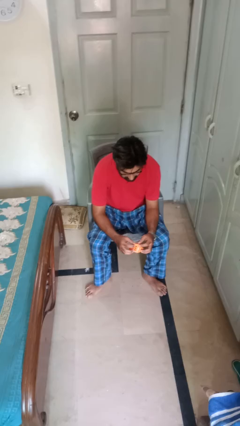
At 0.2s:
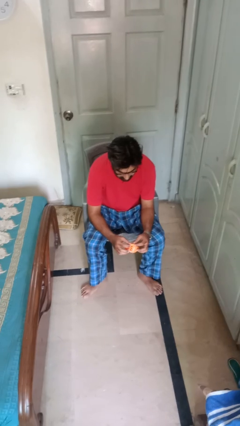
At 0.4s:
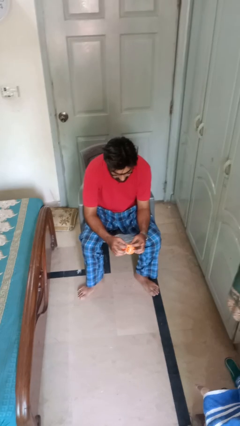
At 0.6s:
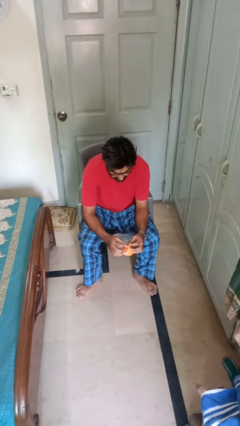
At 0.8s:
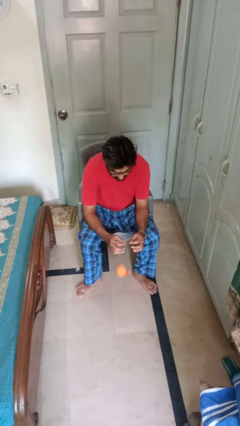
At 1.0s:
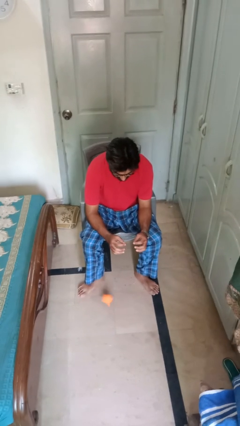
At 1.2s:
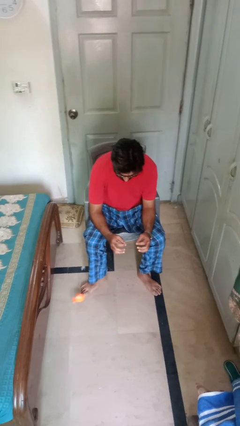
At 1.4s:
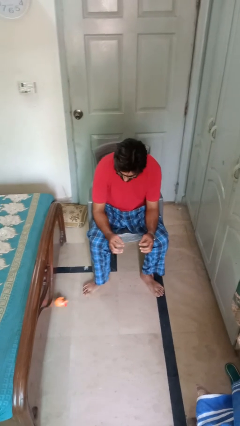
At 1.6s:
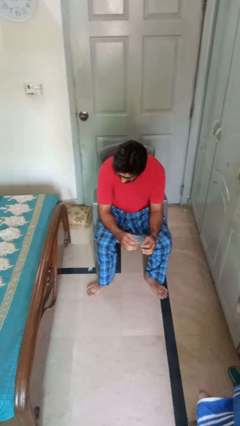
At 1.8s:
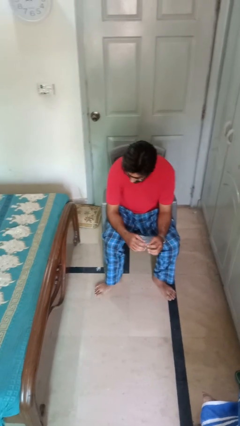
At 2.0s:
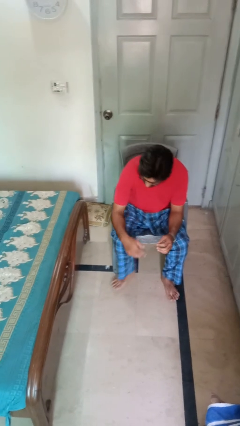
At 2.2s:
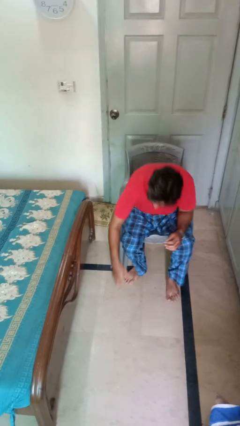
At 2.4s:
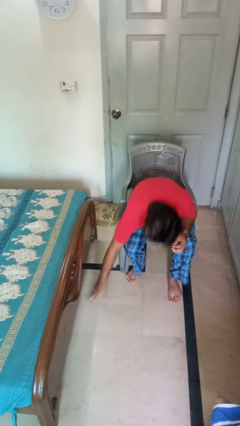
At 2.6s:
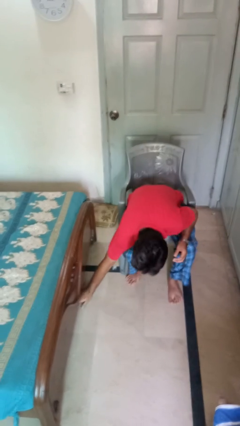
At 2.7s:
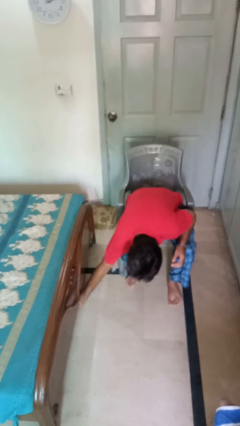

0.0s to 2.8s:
person drops object

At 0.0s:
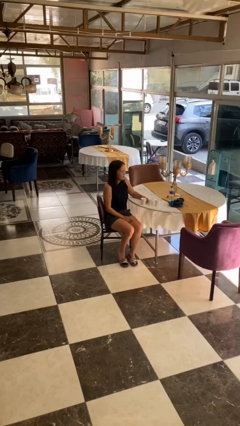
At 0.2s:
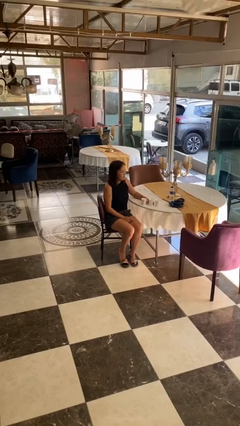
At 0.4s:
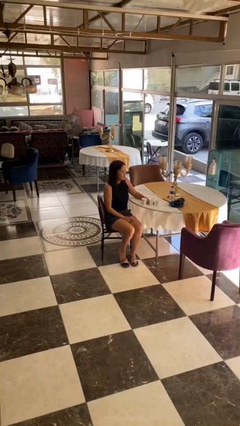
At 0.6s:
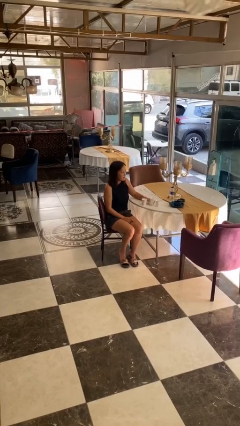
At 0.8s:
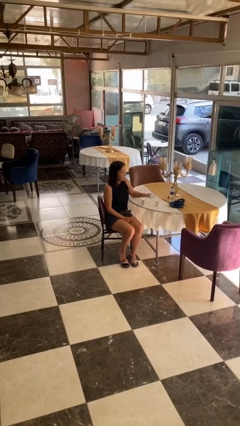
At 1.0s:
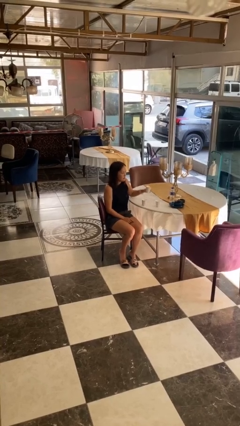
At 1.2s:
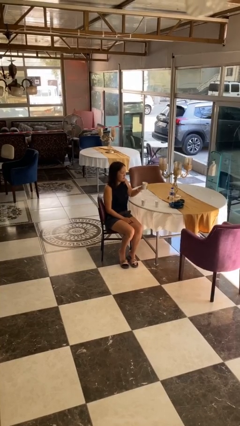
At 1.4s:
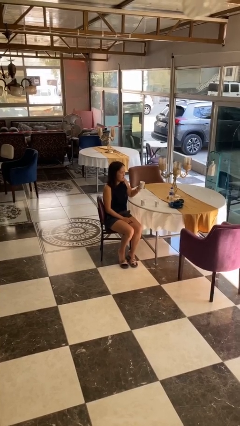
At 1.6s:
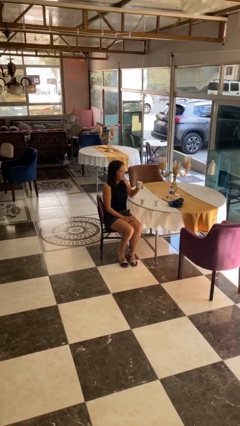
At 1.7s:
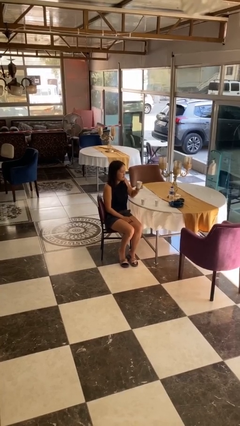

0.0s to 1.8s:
person picks up object from table

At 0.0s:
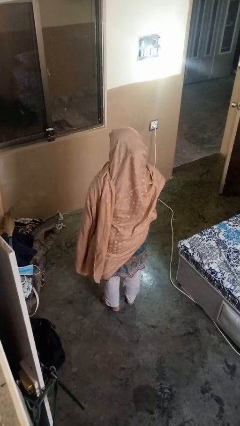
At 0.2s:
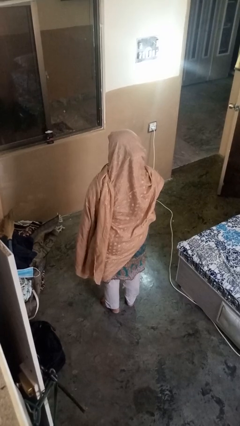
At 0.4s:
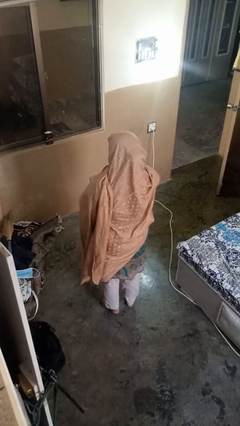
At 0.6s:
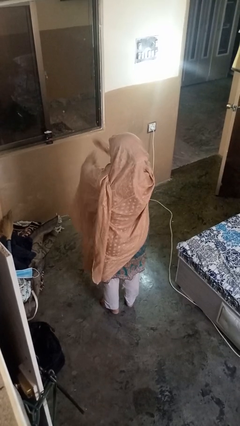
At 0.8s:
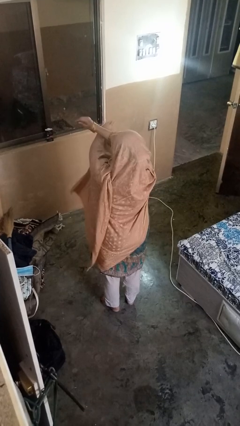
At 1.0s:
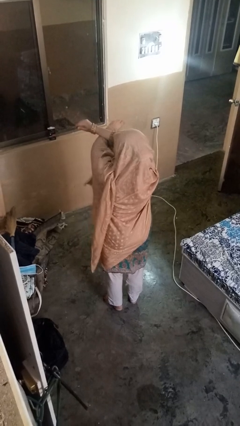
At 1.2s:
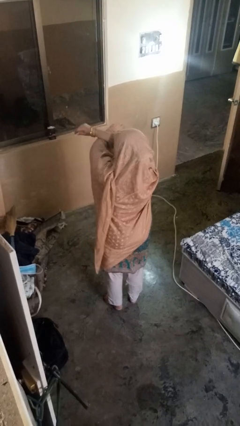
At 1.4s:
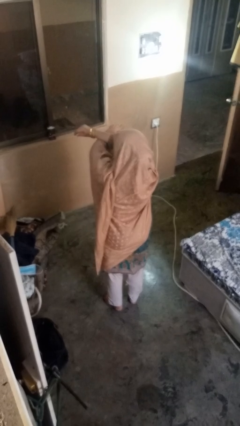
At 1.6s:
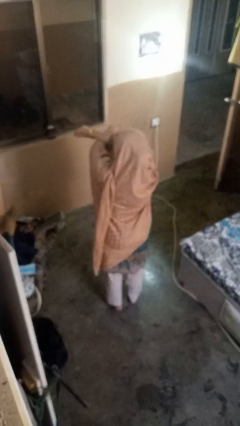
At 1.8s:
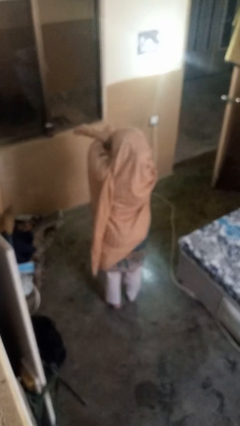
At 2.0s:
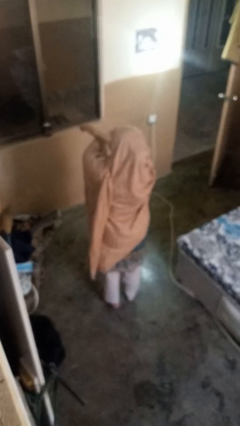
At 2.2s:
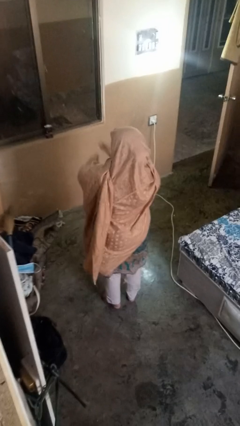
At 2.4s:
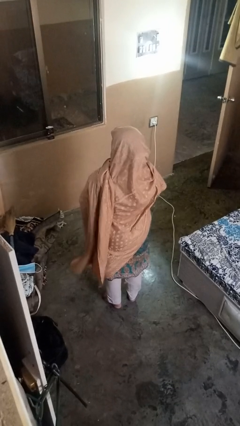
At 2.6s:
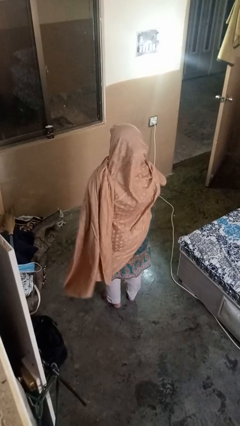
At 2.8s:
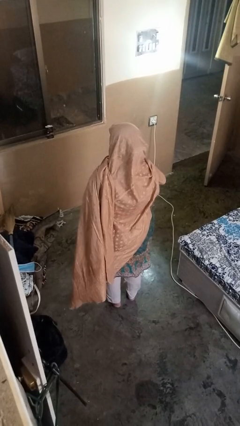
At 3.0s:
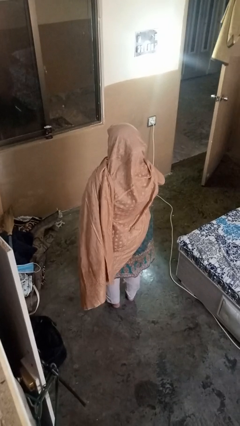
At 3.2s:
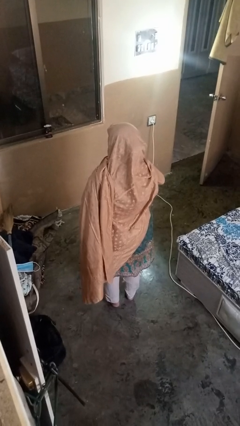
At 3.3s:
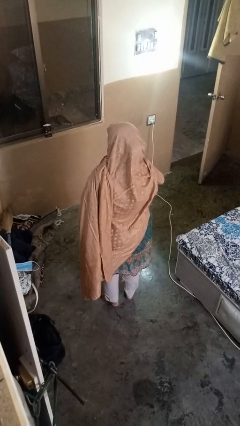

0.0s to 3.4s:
person crosses arms

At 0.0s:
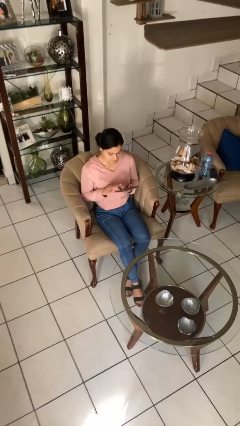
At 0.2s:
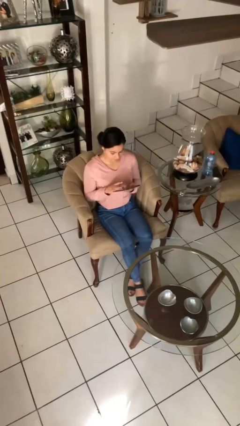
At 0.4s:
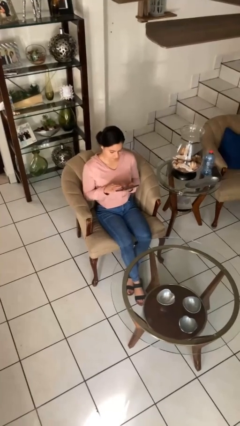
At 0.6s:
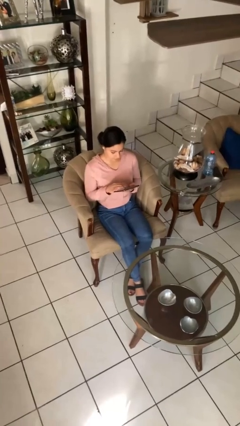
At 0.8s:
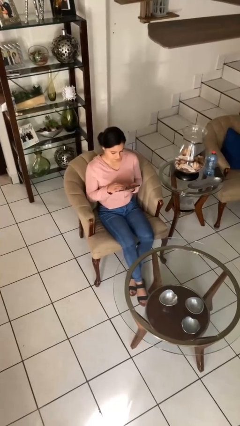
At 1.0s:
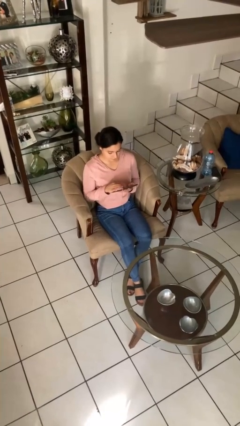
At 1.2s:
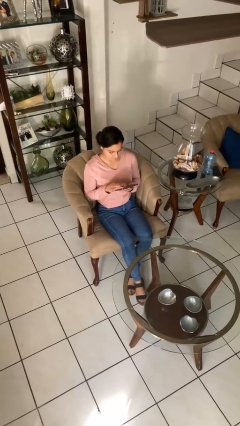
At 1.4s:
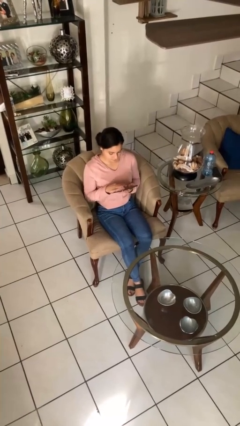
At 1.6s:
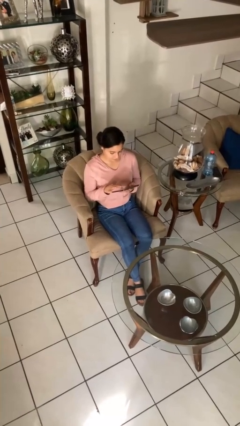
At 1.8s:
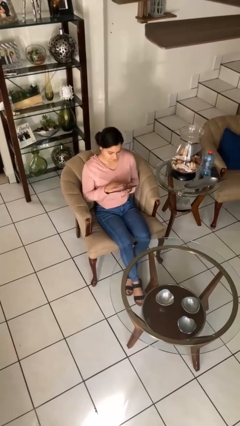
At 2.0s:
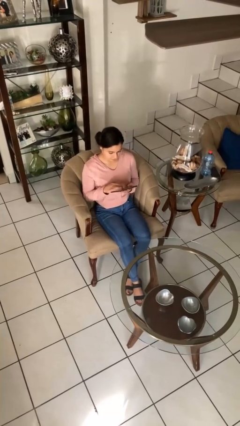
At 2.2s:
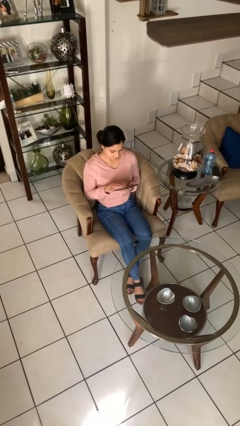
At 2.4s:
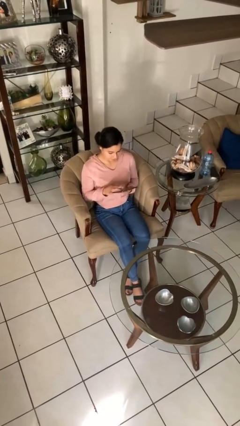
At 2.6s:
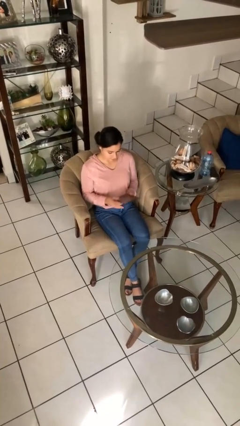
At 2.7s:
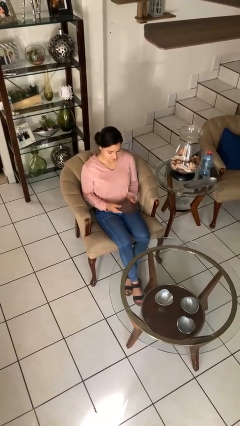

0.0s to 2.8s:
person interacts with tablet

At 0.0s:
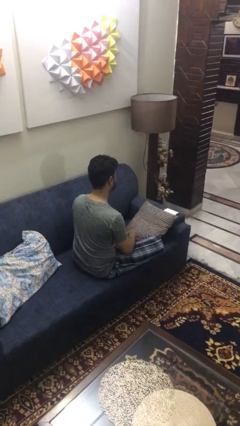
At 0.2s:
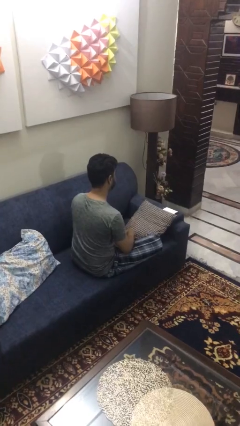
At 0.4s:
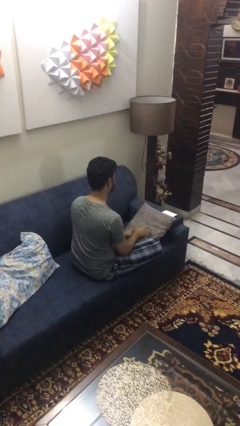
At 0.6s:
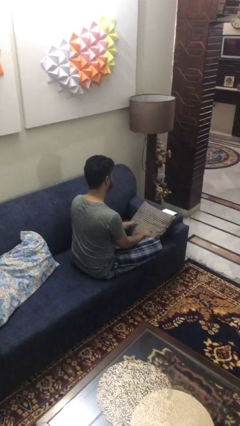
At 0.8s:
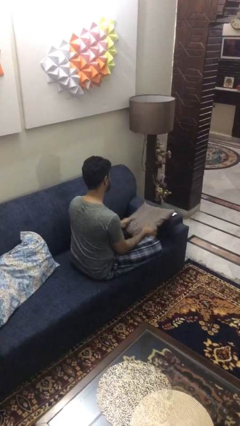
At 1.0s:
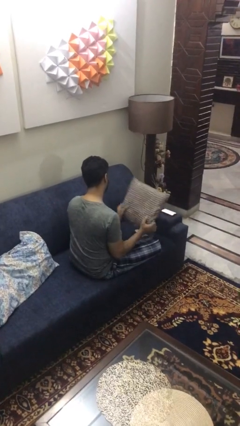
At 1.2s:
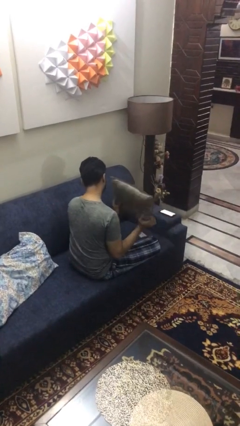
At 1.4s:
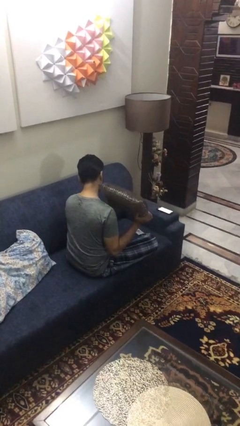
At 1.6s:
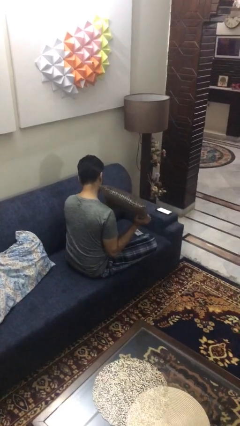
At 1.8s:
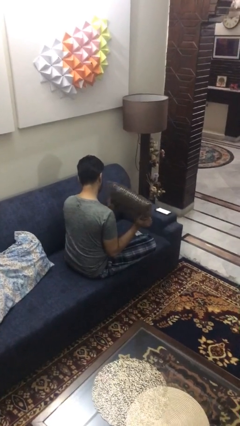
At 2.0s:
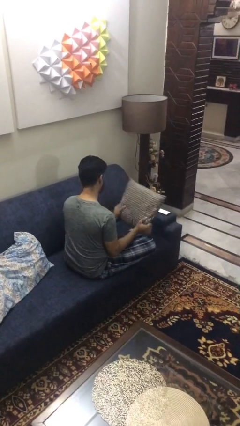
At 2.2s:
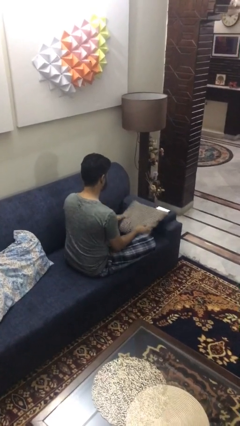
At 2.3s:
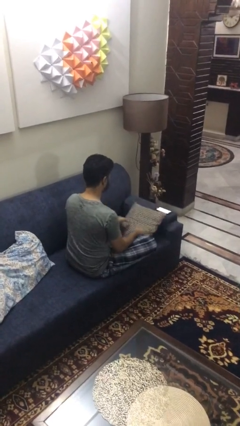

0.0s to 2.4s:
person searches in couch

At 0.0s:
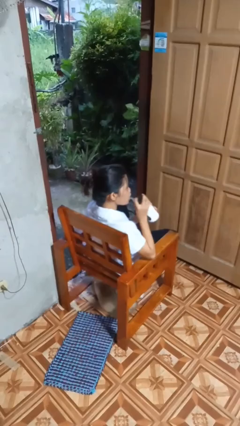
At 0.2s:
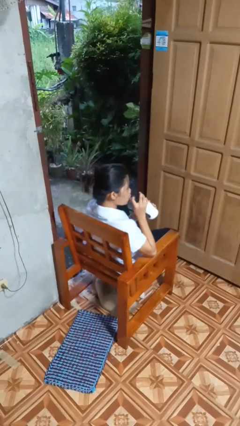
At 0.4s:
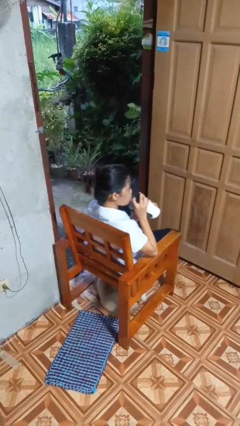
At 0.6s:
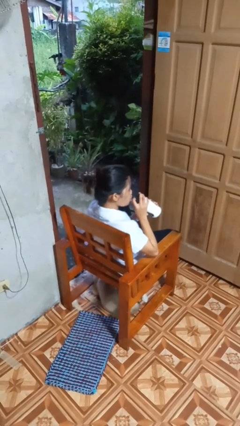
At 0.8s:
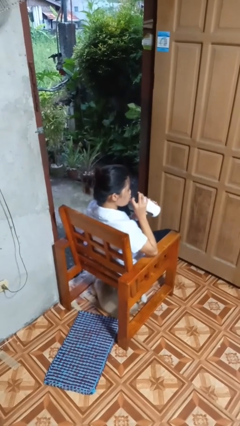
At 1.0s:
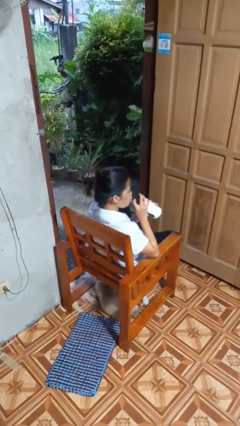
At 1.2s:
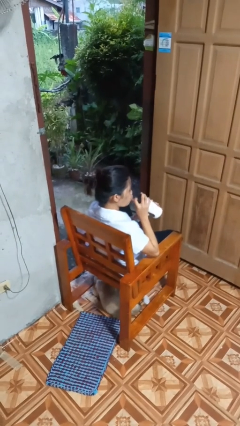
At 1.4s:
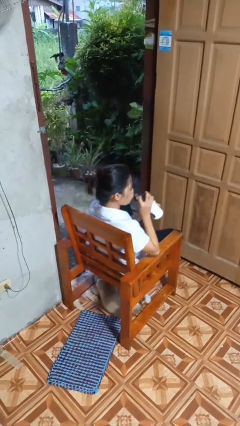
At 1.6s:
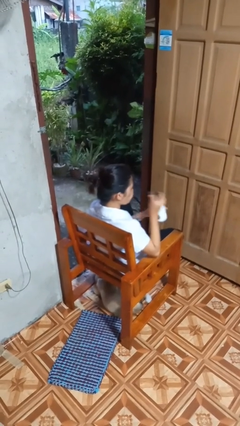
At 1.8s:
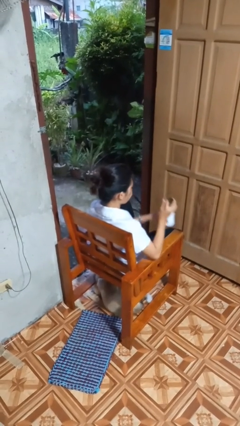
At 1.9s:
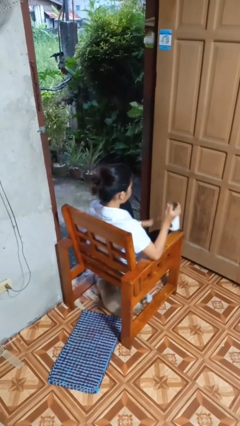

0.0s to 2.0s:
person drinks from straw

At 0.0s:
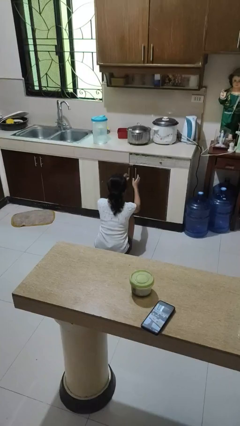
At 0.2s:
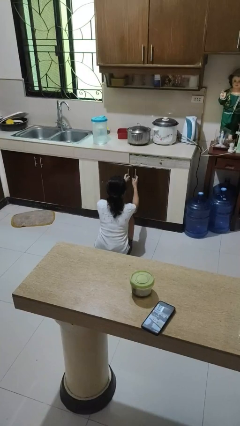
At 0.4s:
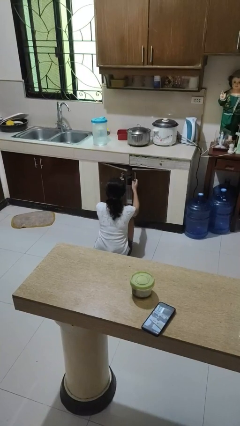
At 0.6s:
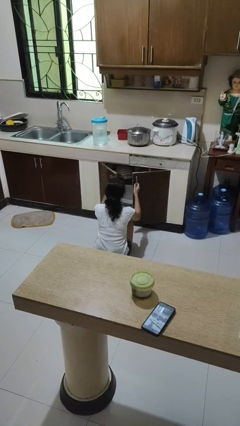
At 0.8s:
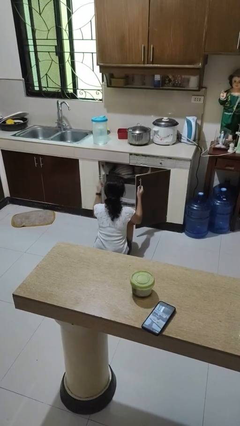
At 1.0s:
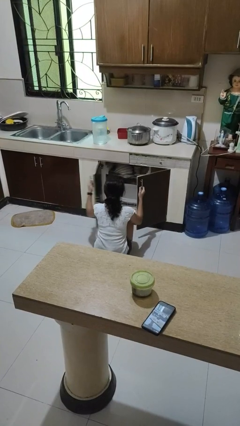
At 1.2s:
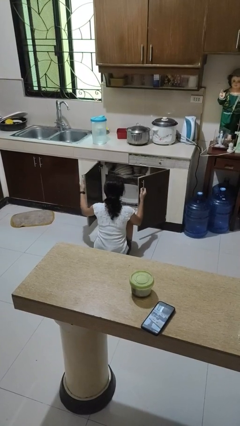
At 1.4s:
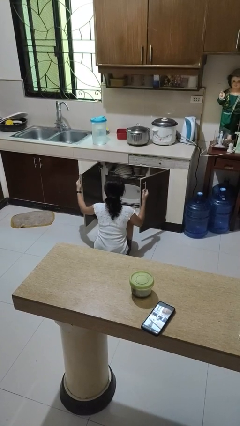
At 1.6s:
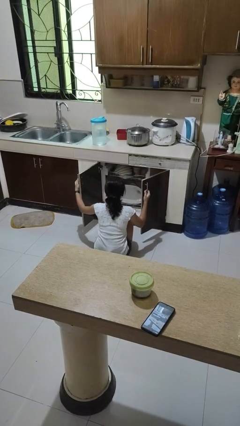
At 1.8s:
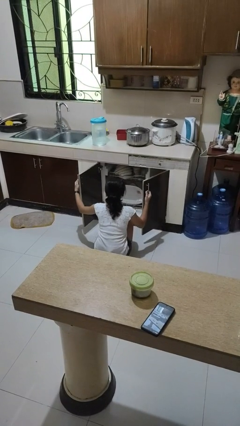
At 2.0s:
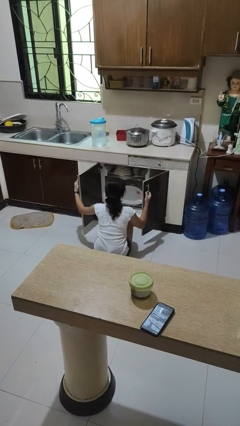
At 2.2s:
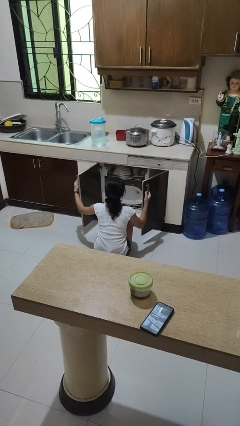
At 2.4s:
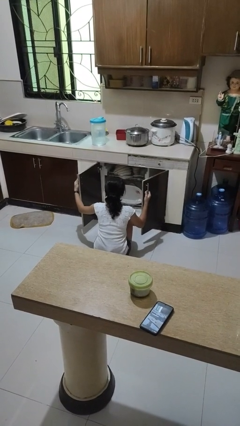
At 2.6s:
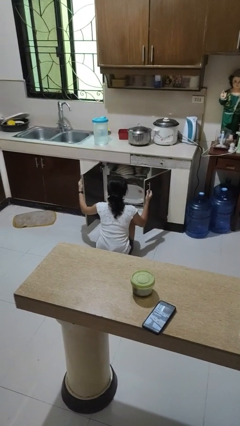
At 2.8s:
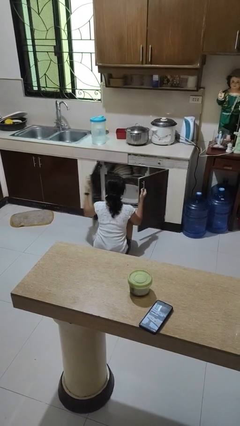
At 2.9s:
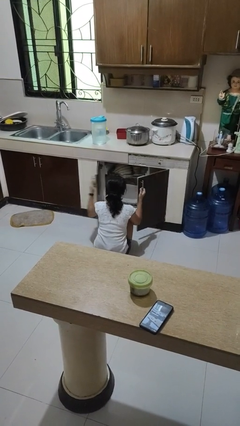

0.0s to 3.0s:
person opens dishwasher
